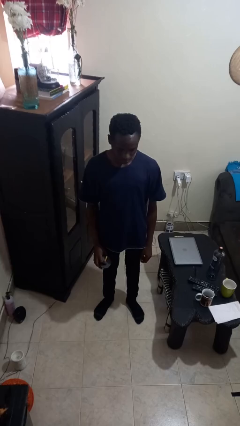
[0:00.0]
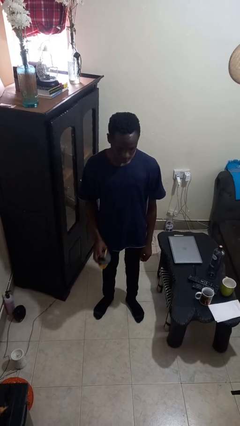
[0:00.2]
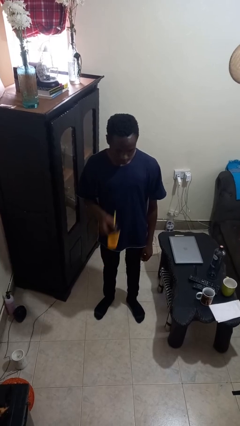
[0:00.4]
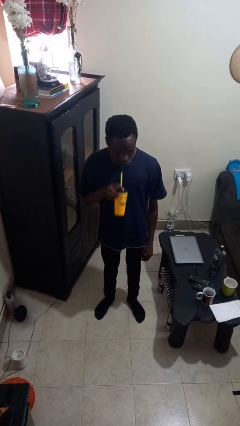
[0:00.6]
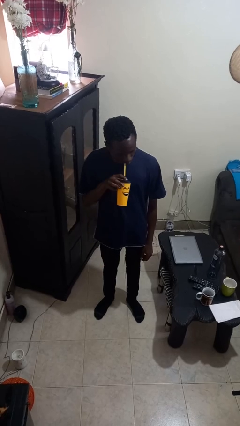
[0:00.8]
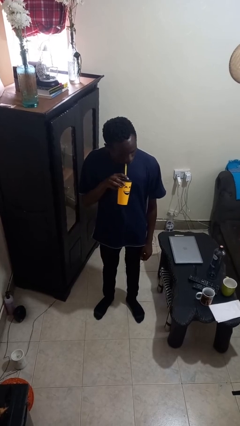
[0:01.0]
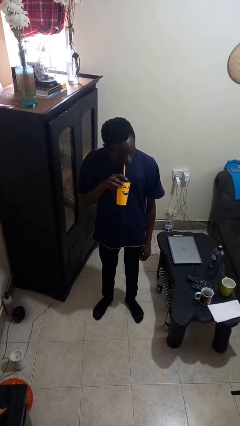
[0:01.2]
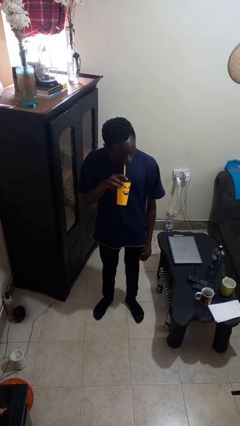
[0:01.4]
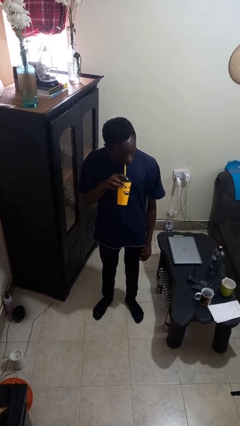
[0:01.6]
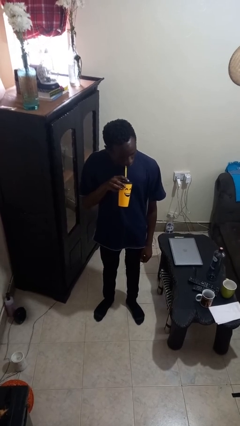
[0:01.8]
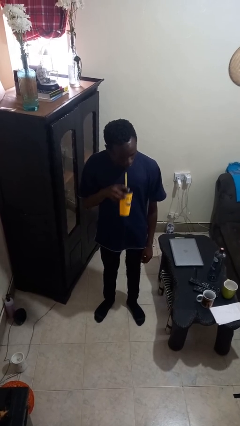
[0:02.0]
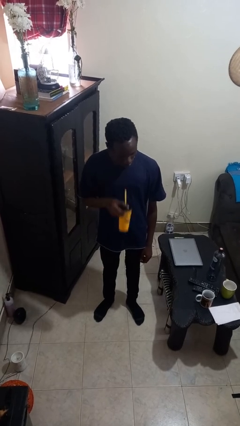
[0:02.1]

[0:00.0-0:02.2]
person drinks from straw

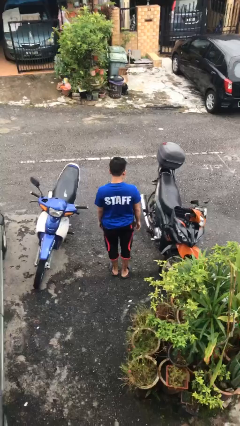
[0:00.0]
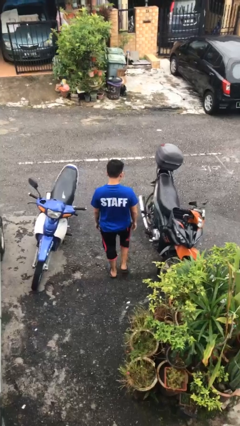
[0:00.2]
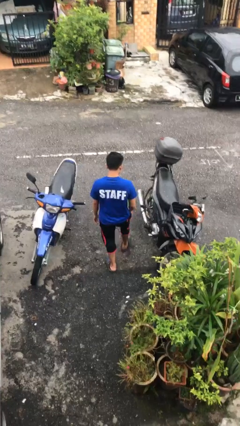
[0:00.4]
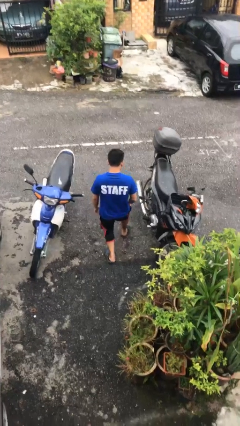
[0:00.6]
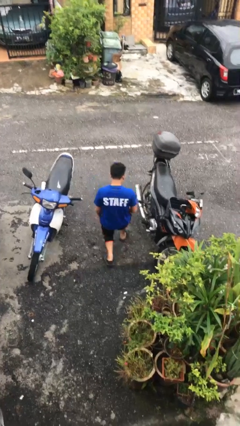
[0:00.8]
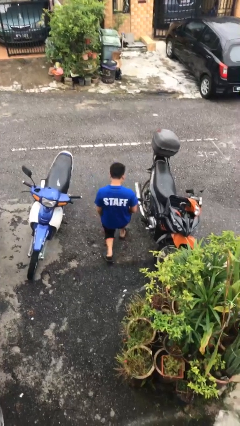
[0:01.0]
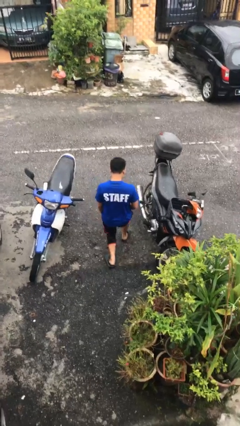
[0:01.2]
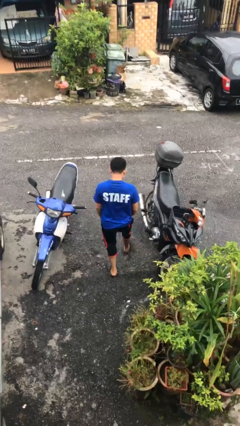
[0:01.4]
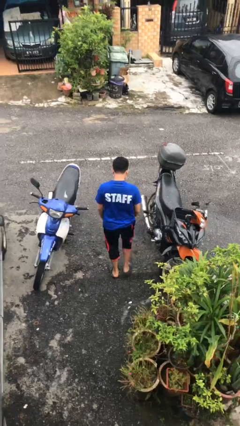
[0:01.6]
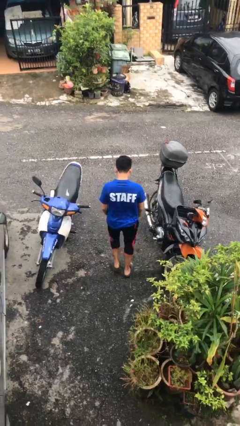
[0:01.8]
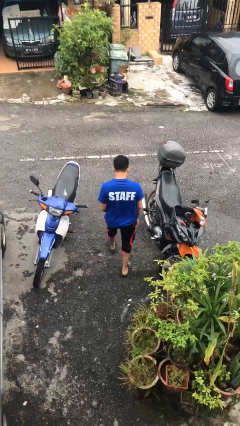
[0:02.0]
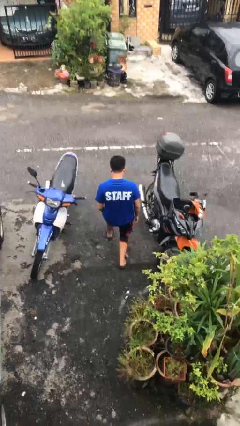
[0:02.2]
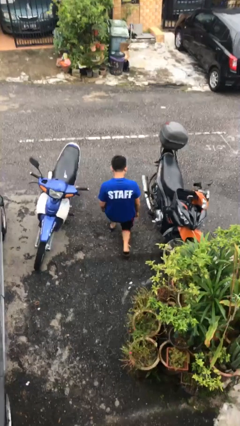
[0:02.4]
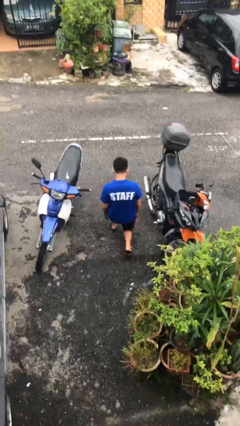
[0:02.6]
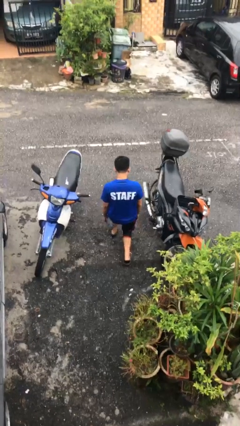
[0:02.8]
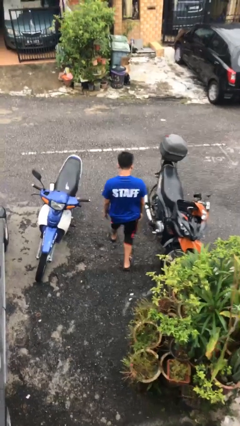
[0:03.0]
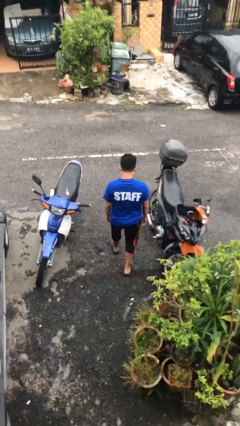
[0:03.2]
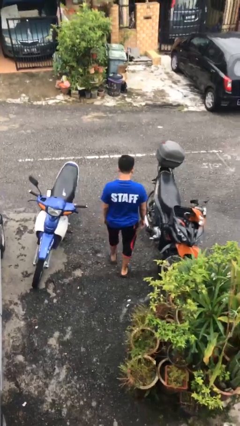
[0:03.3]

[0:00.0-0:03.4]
person exercises with lunges

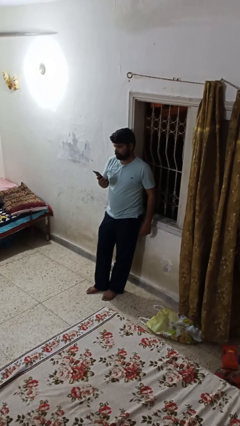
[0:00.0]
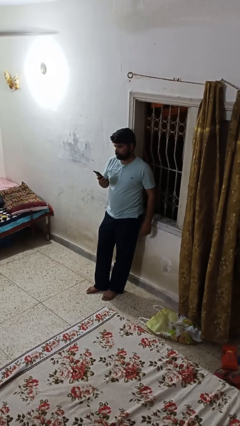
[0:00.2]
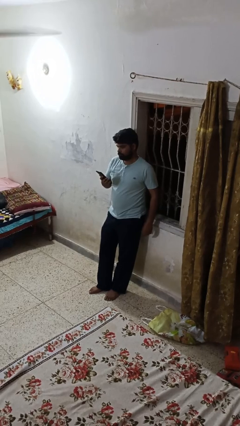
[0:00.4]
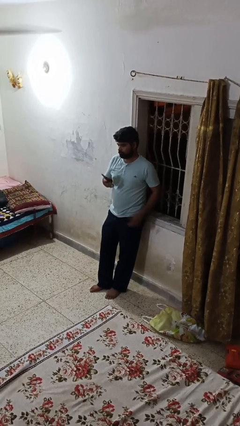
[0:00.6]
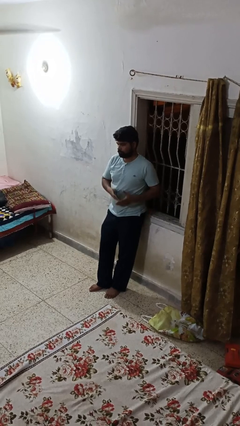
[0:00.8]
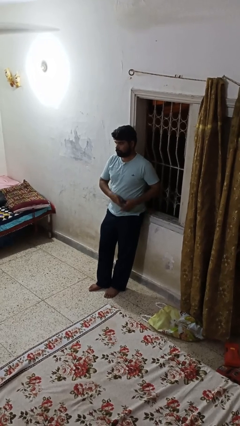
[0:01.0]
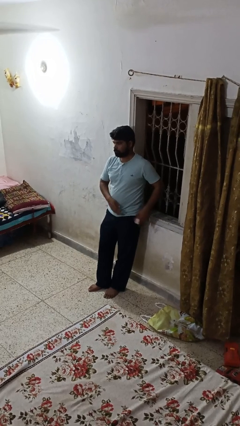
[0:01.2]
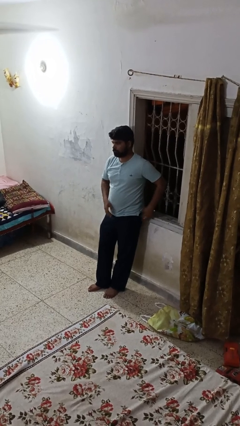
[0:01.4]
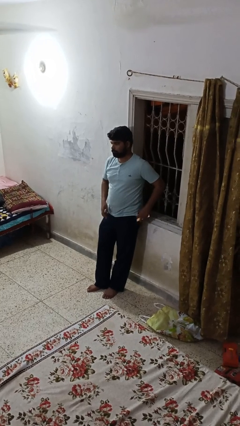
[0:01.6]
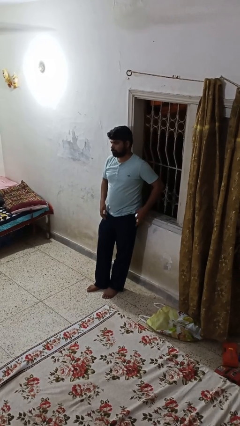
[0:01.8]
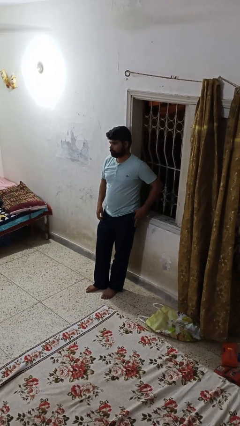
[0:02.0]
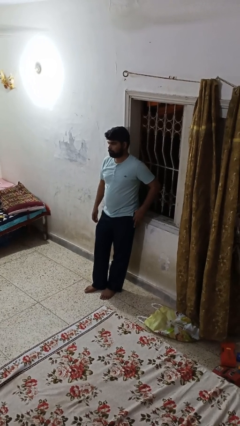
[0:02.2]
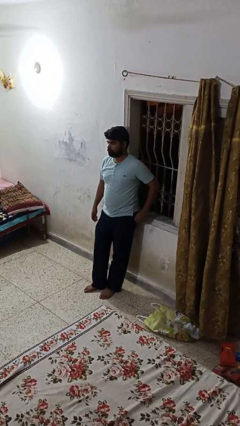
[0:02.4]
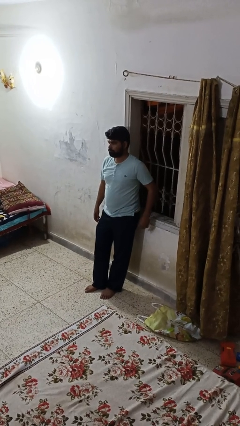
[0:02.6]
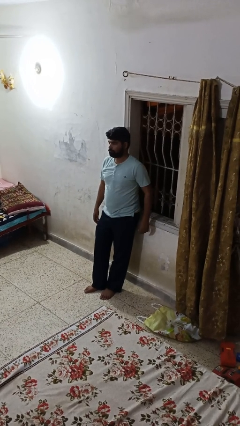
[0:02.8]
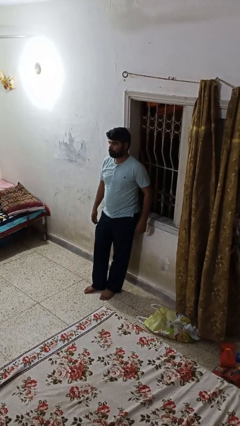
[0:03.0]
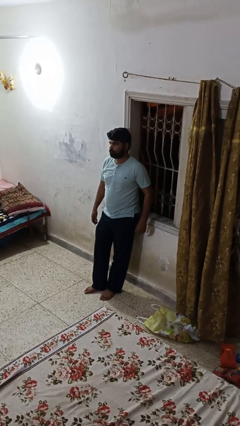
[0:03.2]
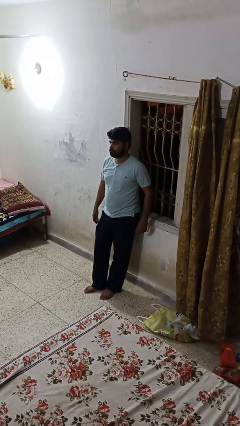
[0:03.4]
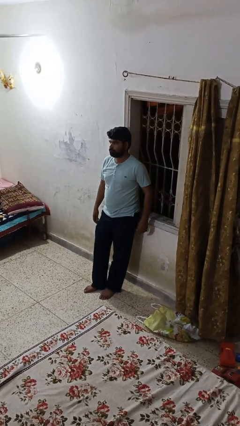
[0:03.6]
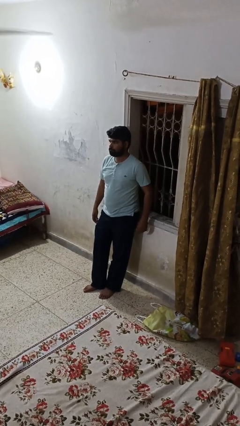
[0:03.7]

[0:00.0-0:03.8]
person puts phone into pocket

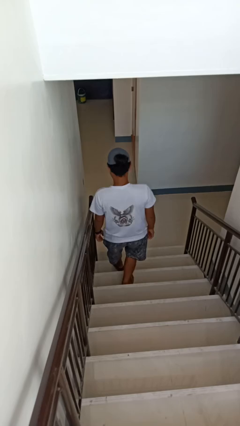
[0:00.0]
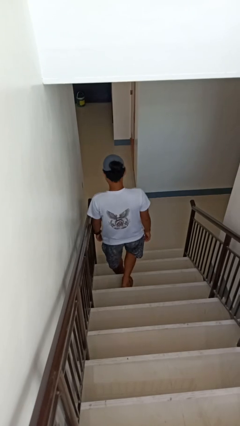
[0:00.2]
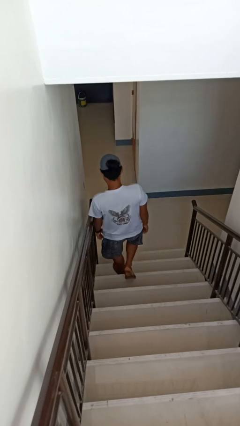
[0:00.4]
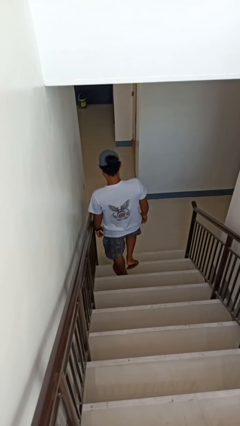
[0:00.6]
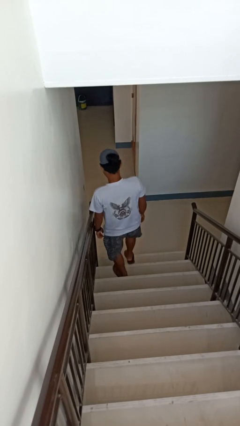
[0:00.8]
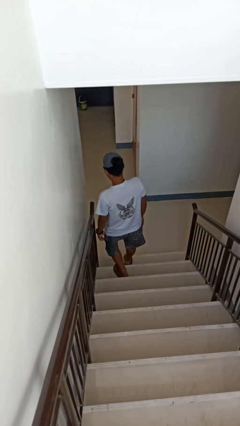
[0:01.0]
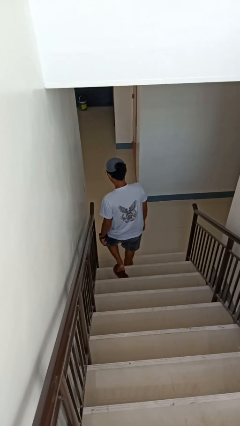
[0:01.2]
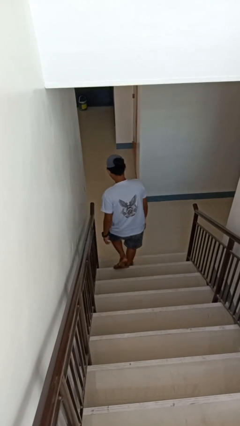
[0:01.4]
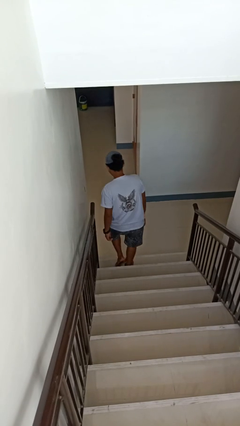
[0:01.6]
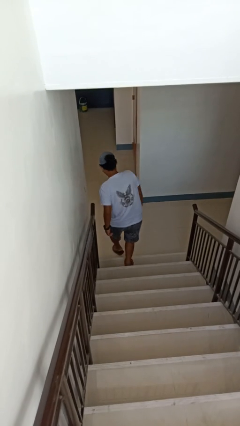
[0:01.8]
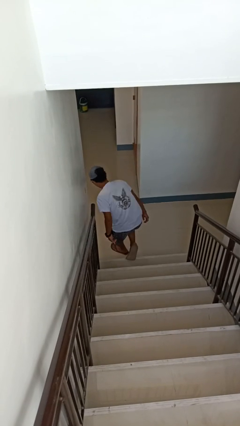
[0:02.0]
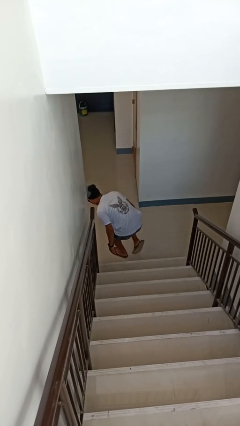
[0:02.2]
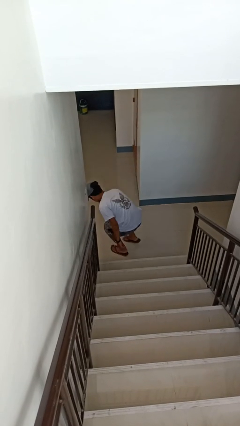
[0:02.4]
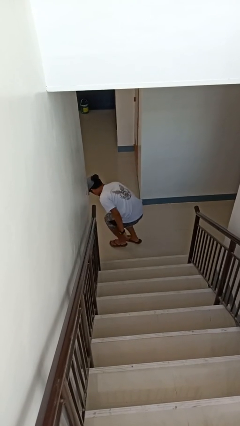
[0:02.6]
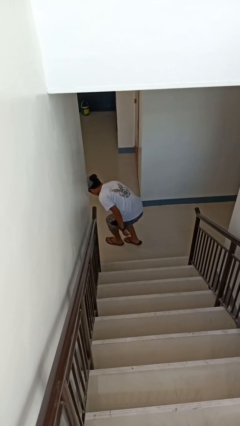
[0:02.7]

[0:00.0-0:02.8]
person climbs down stairs

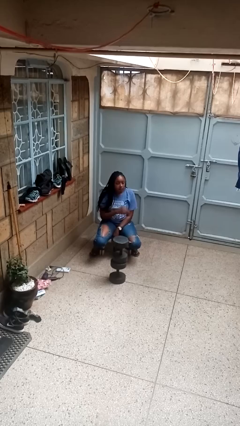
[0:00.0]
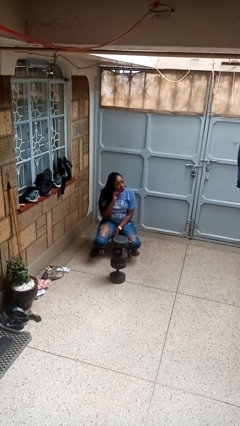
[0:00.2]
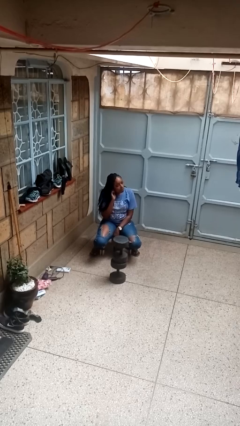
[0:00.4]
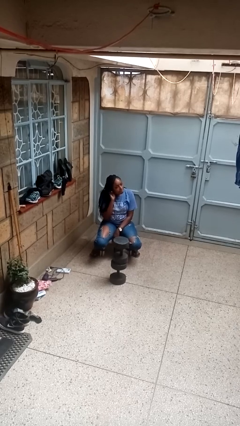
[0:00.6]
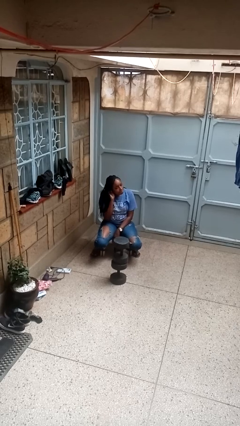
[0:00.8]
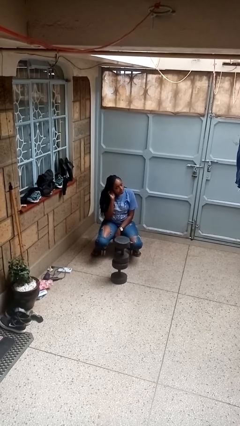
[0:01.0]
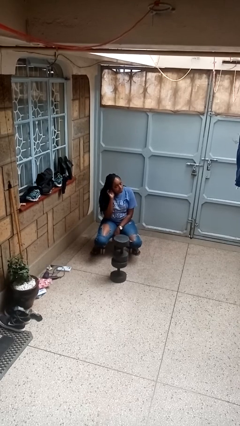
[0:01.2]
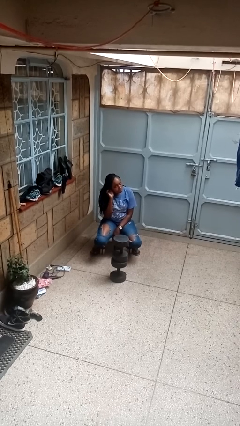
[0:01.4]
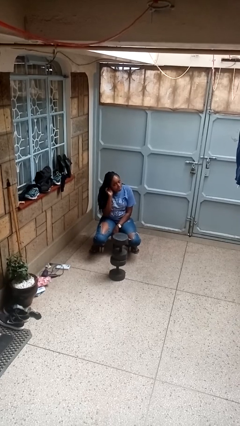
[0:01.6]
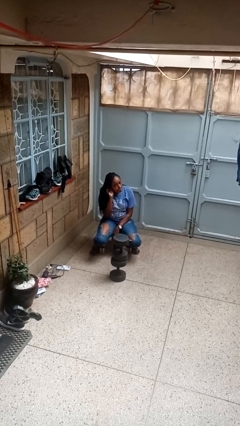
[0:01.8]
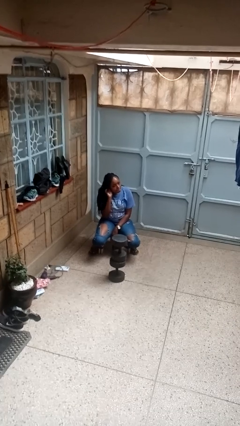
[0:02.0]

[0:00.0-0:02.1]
person gestures listen closely

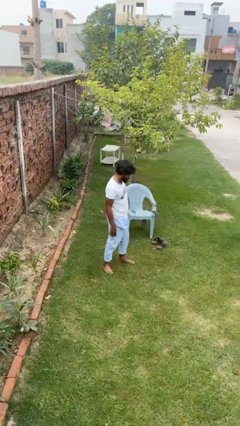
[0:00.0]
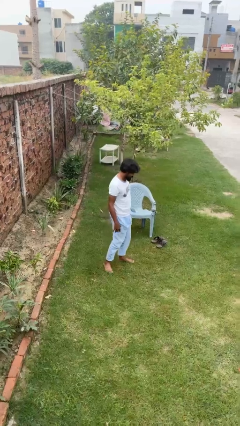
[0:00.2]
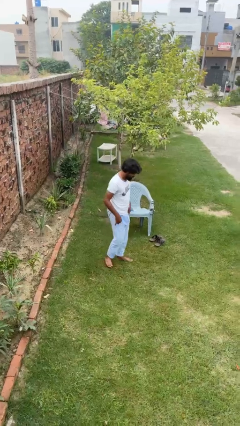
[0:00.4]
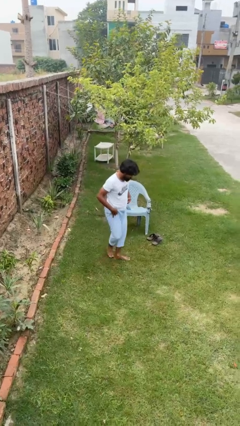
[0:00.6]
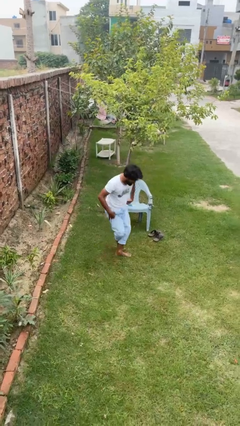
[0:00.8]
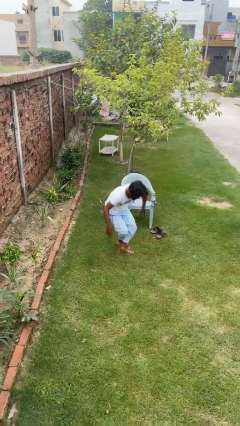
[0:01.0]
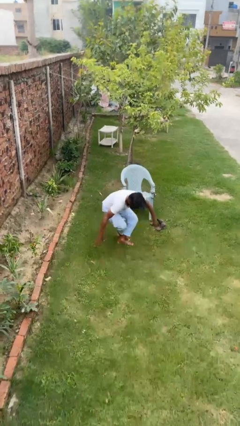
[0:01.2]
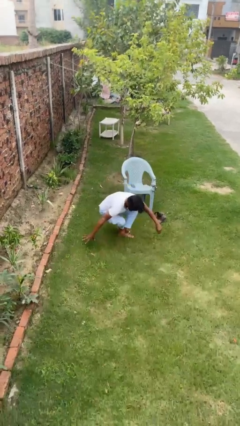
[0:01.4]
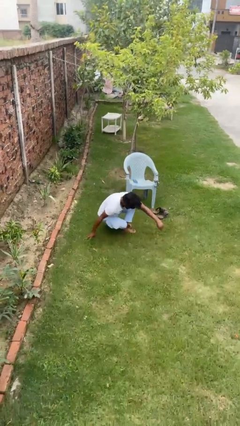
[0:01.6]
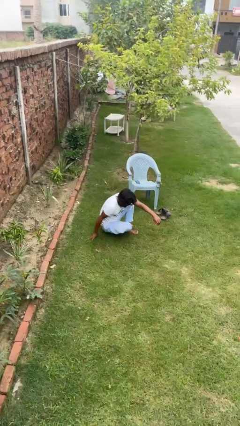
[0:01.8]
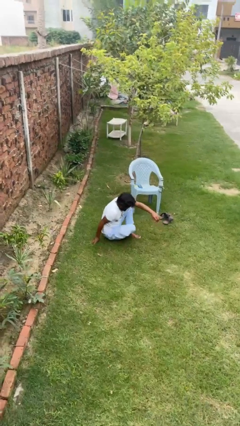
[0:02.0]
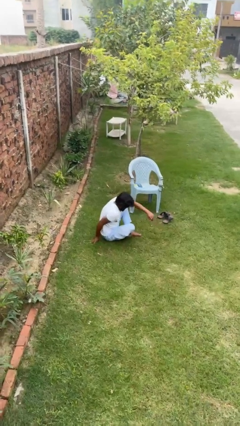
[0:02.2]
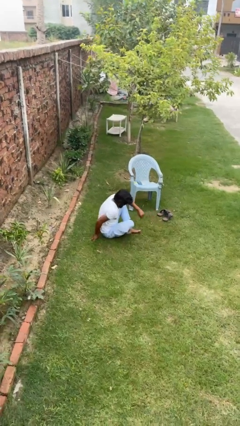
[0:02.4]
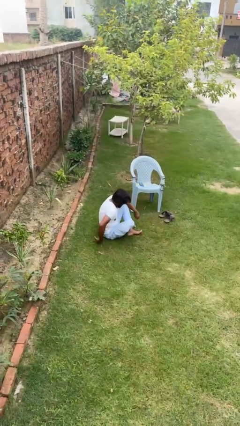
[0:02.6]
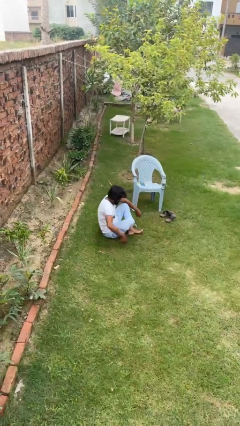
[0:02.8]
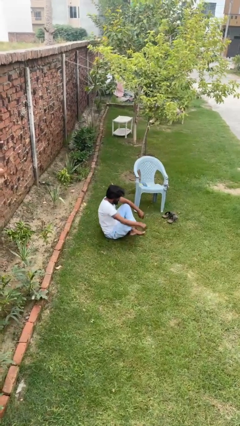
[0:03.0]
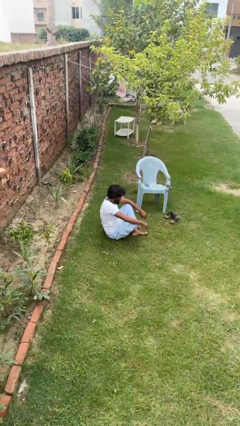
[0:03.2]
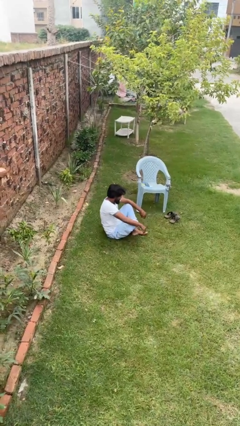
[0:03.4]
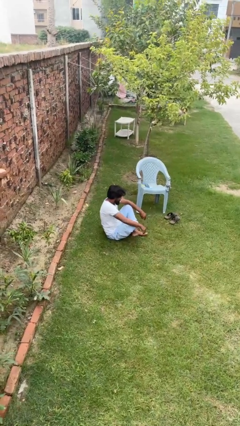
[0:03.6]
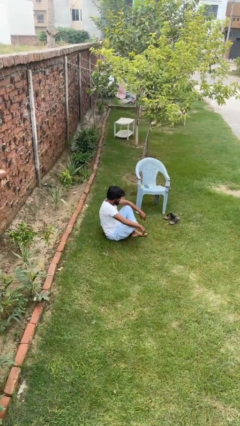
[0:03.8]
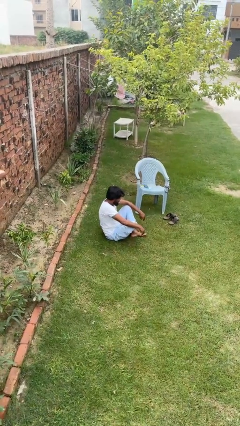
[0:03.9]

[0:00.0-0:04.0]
person sits crisscross
